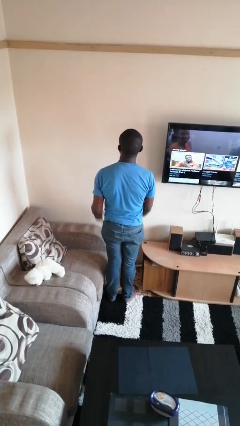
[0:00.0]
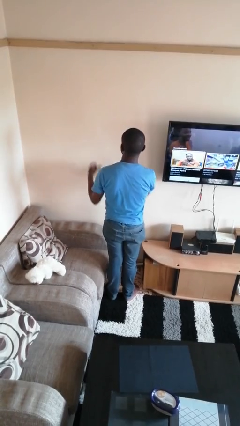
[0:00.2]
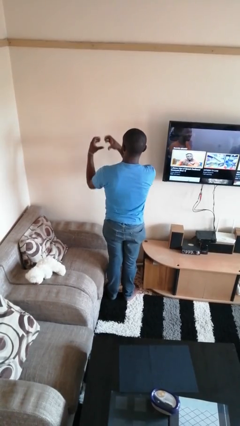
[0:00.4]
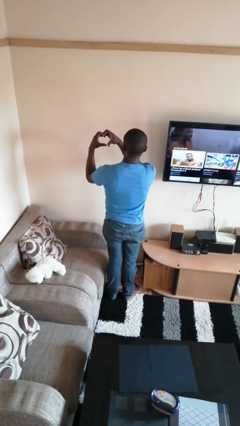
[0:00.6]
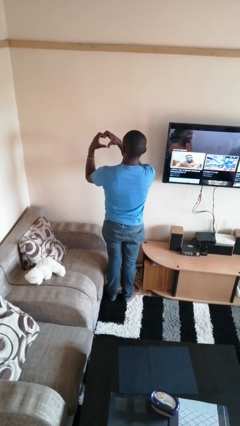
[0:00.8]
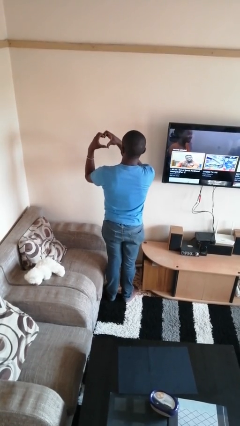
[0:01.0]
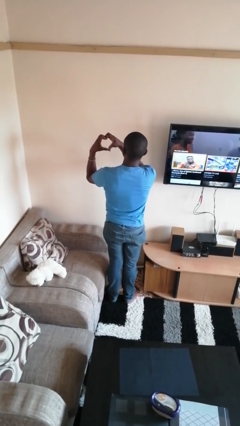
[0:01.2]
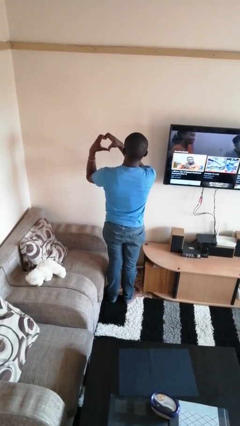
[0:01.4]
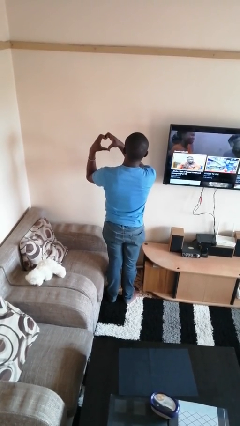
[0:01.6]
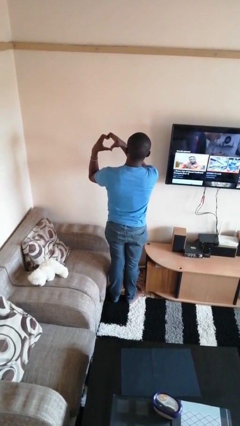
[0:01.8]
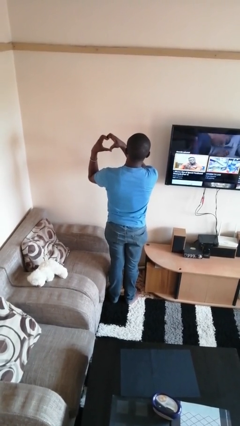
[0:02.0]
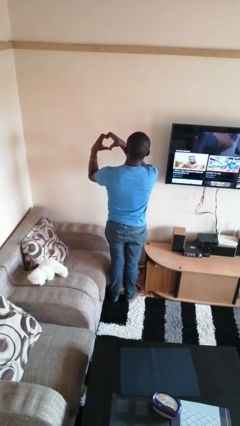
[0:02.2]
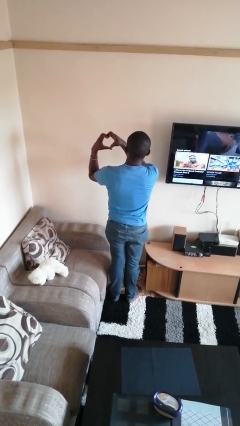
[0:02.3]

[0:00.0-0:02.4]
person gestures heart

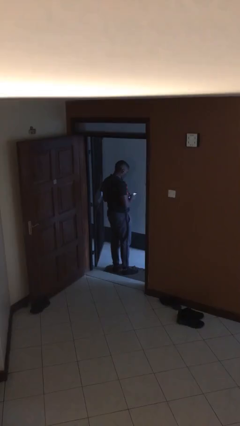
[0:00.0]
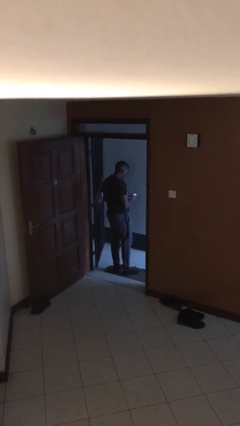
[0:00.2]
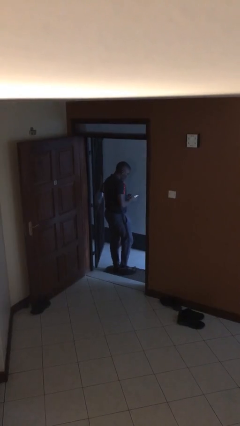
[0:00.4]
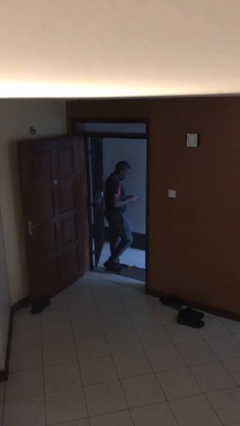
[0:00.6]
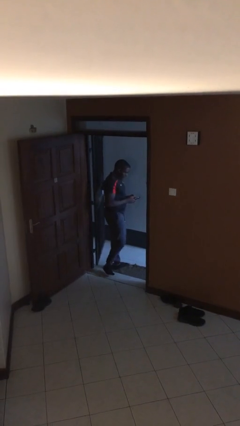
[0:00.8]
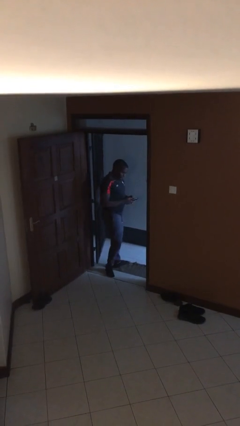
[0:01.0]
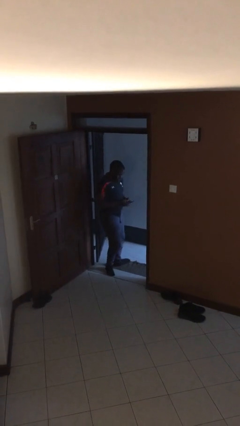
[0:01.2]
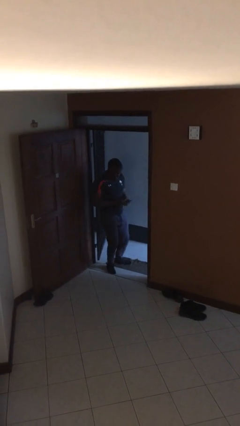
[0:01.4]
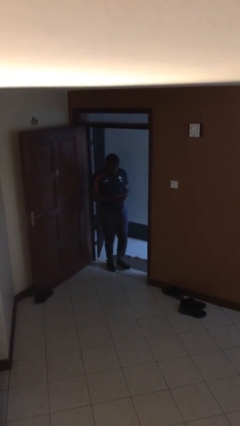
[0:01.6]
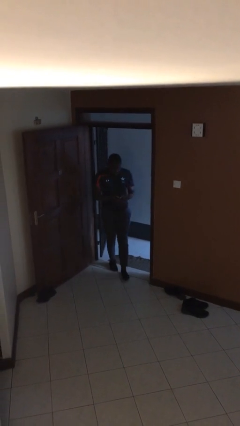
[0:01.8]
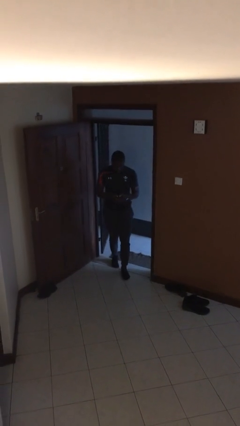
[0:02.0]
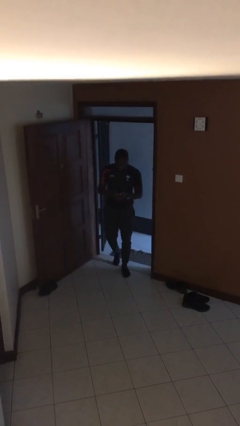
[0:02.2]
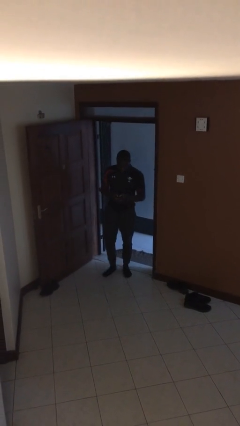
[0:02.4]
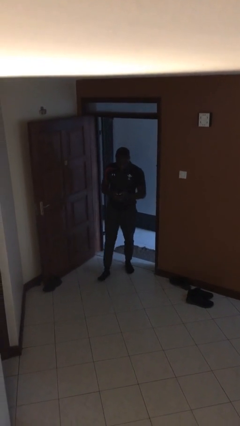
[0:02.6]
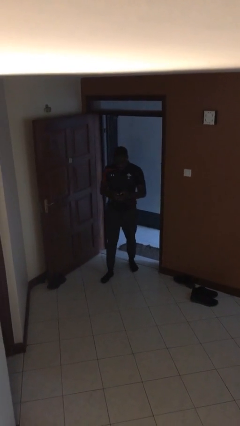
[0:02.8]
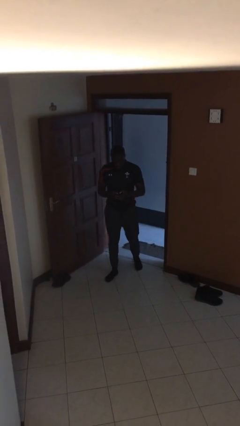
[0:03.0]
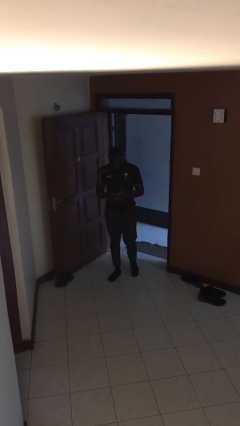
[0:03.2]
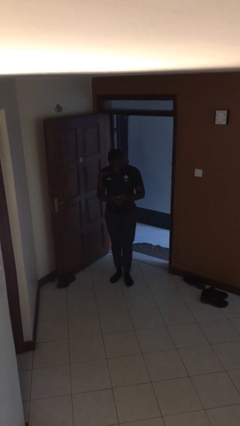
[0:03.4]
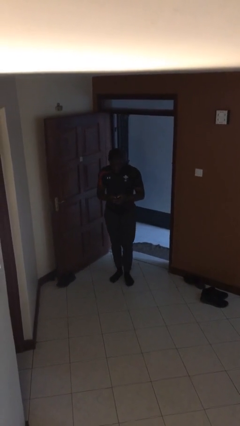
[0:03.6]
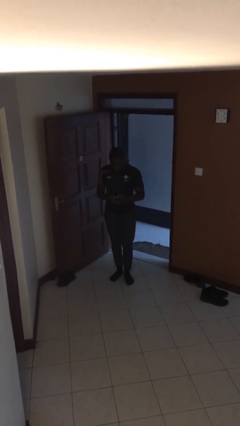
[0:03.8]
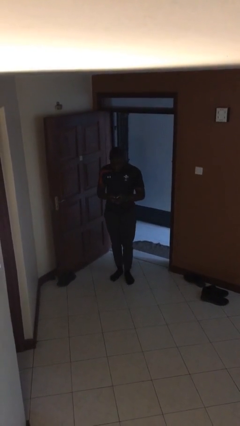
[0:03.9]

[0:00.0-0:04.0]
person enters scene through structure

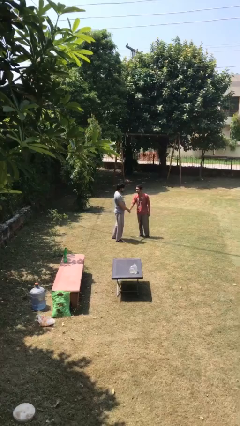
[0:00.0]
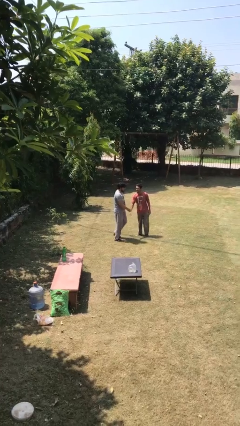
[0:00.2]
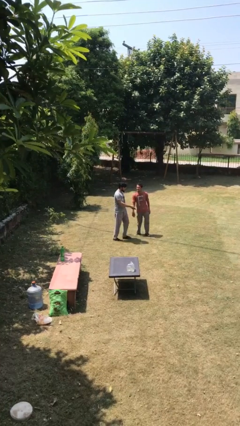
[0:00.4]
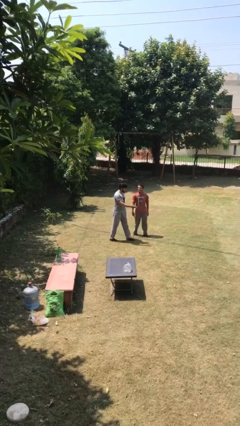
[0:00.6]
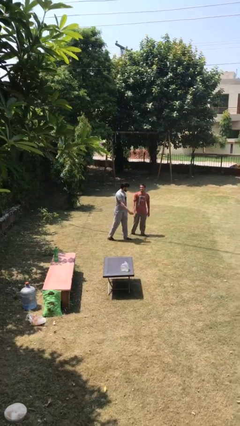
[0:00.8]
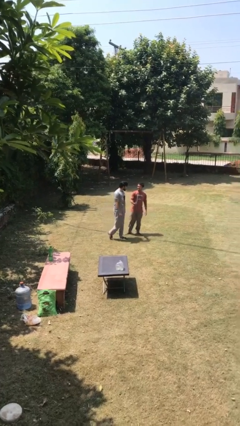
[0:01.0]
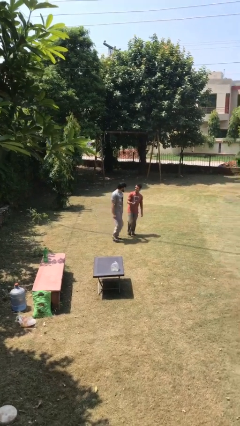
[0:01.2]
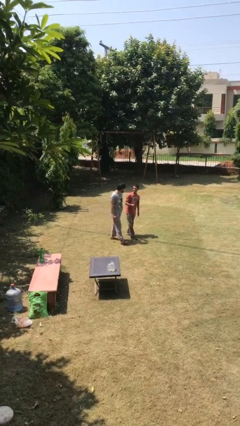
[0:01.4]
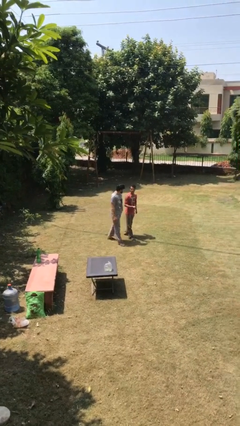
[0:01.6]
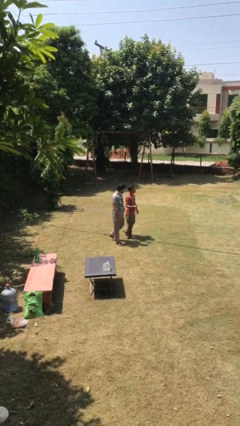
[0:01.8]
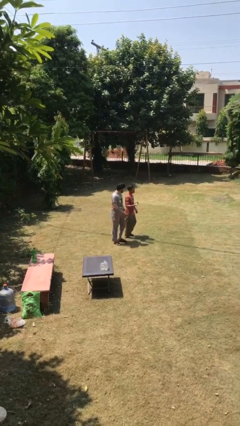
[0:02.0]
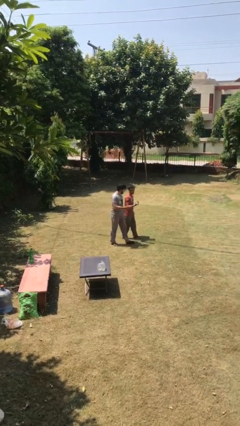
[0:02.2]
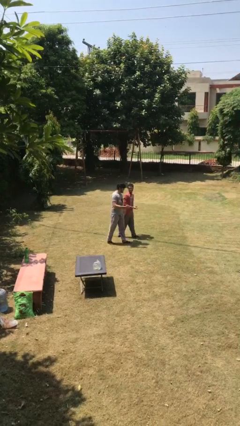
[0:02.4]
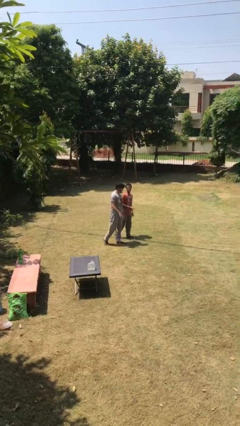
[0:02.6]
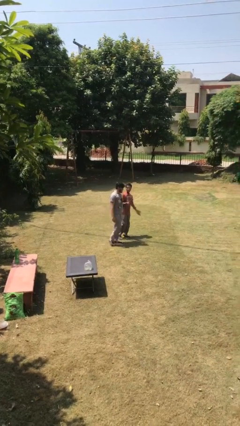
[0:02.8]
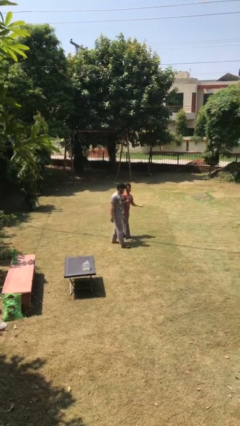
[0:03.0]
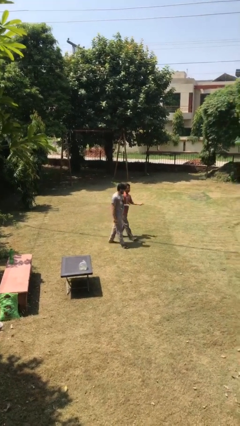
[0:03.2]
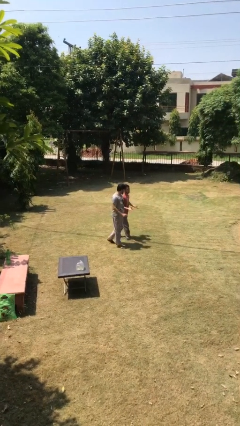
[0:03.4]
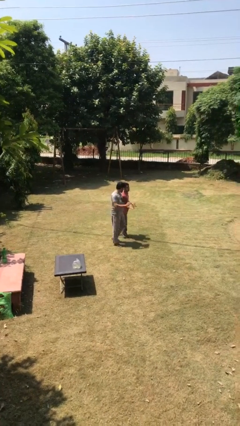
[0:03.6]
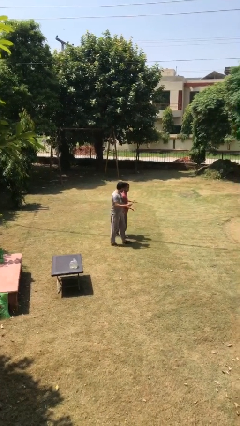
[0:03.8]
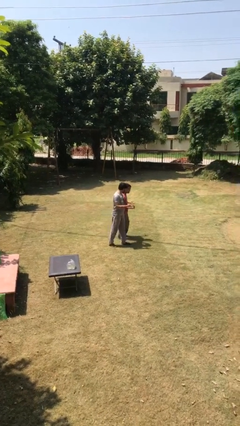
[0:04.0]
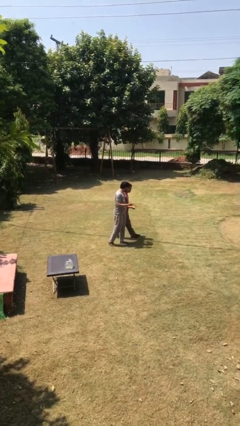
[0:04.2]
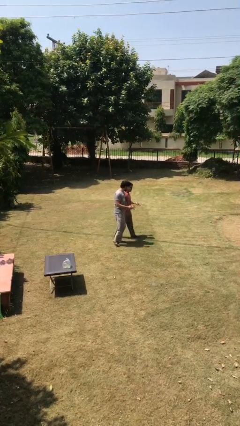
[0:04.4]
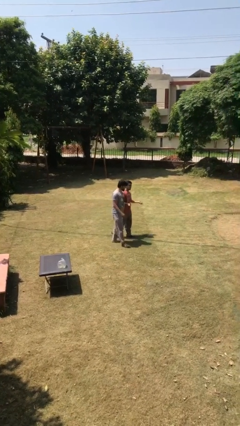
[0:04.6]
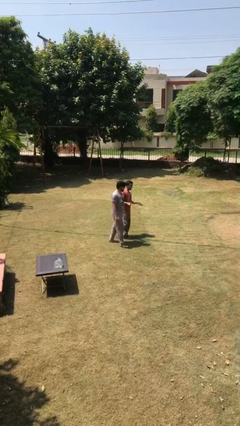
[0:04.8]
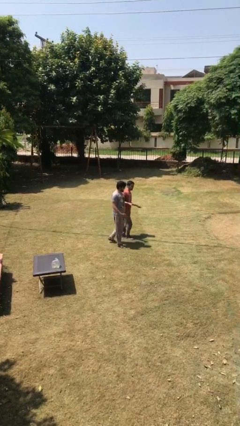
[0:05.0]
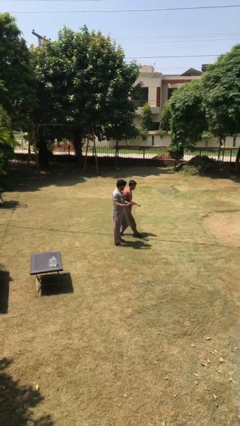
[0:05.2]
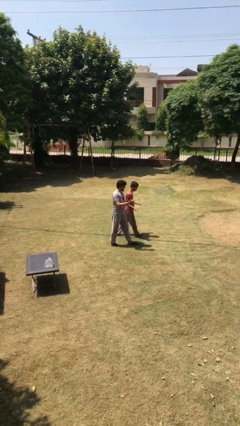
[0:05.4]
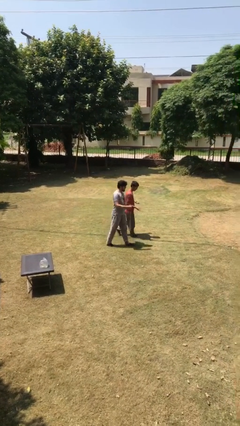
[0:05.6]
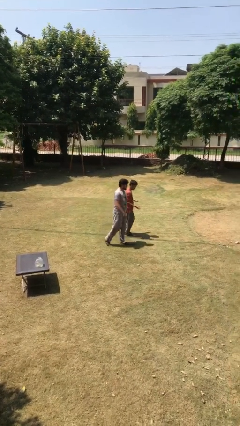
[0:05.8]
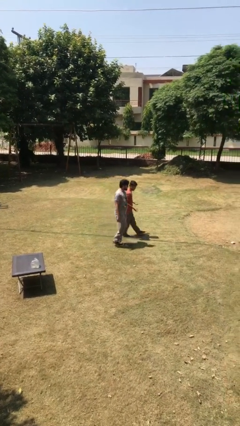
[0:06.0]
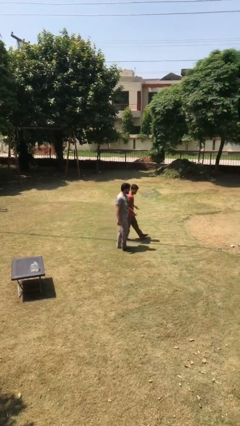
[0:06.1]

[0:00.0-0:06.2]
person talks to person

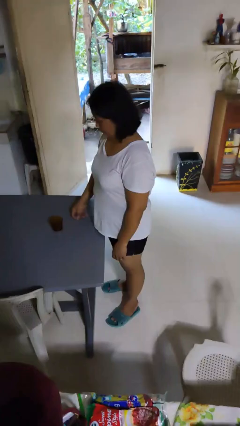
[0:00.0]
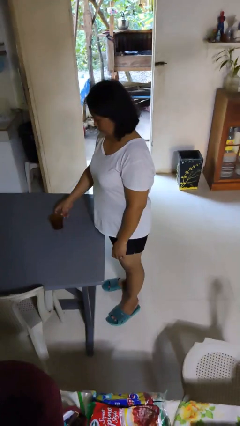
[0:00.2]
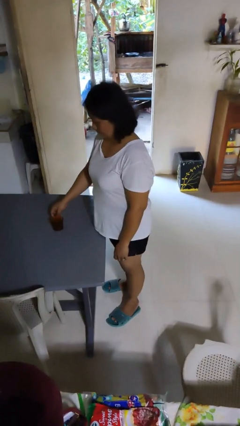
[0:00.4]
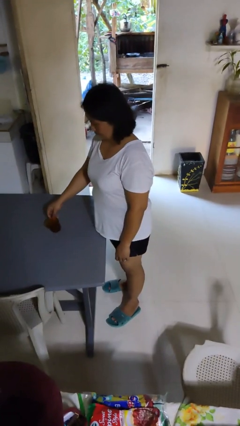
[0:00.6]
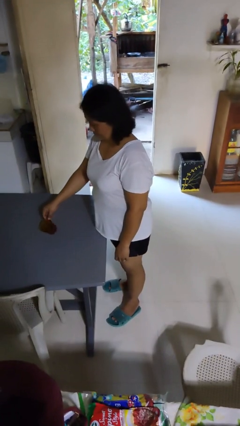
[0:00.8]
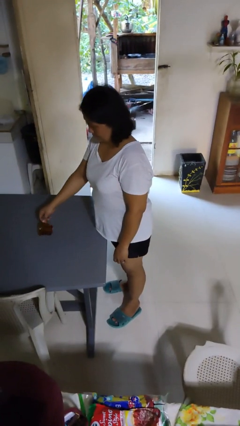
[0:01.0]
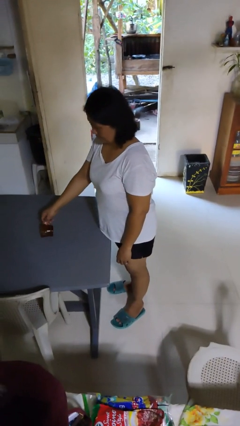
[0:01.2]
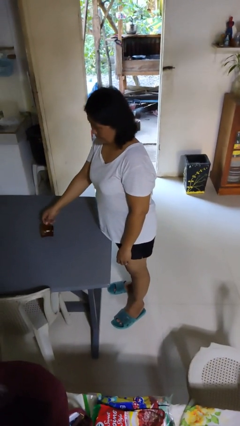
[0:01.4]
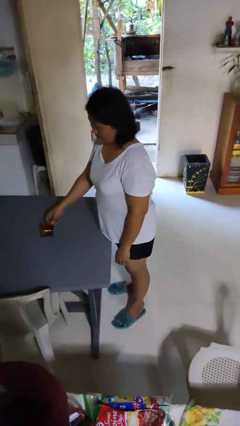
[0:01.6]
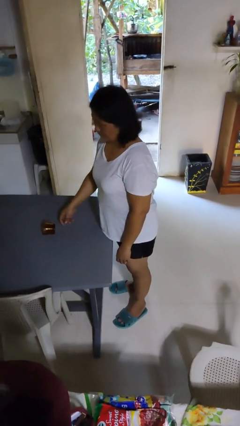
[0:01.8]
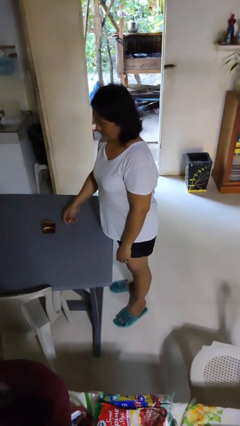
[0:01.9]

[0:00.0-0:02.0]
person knocks over glass

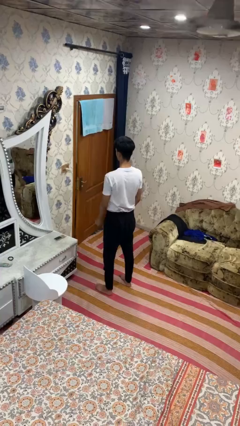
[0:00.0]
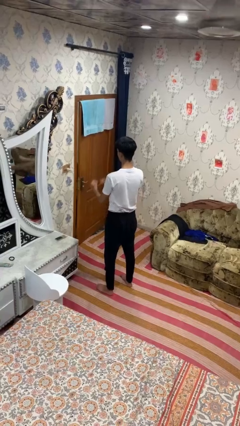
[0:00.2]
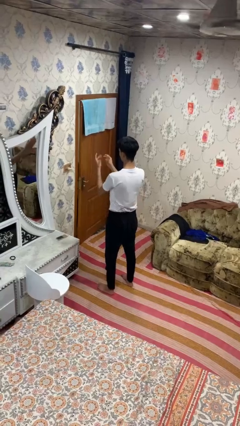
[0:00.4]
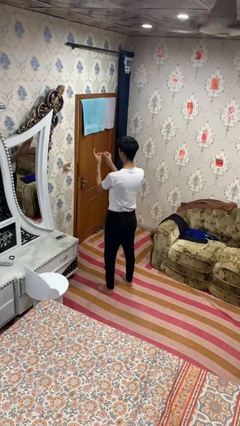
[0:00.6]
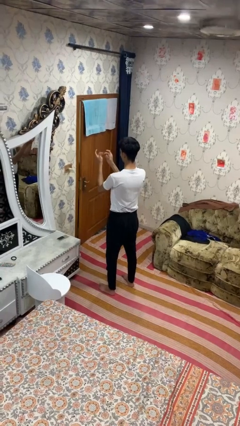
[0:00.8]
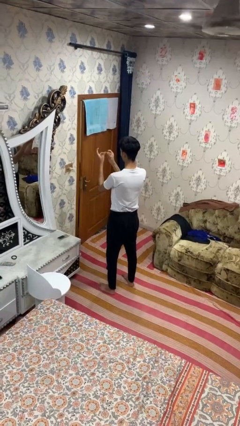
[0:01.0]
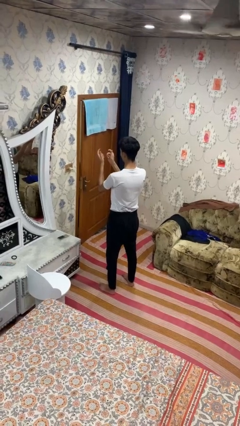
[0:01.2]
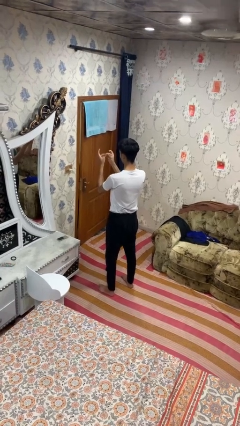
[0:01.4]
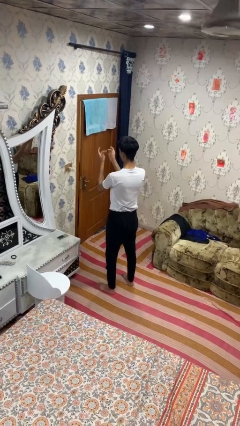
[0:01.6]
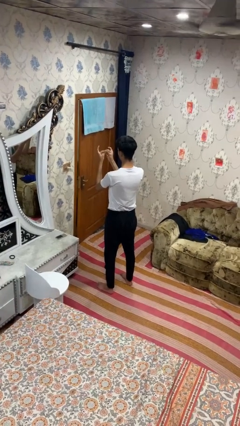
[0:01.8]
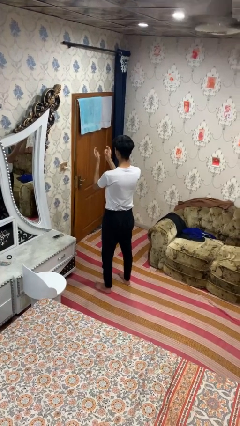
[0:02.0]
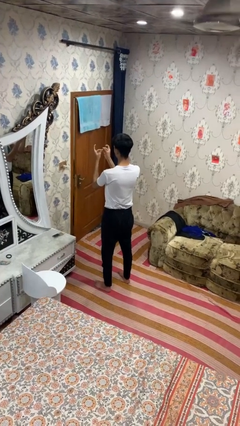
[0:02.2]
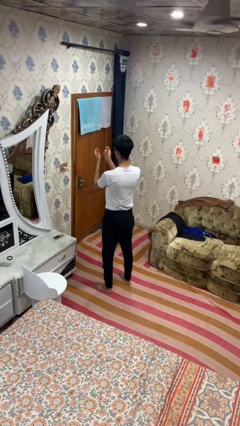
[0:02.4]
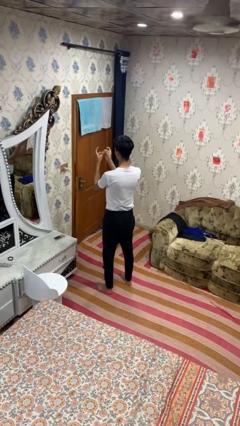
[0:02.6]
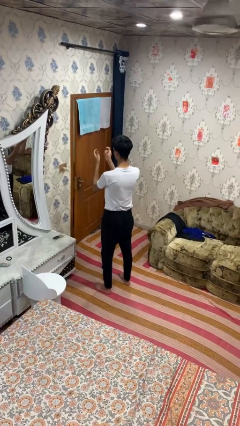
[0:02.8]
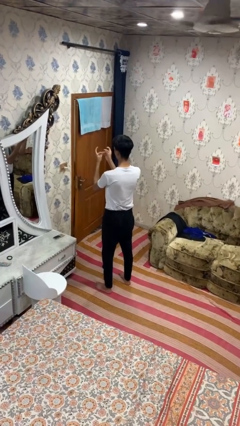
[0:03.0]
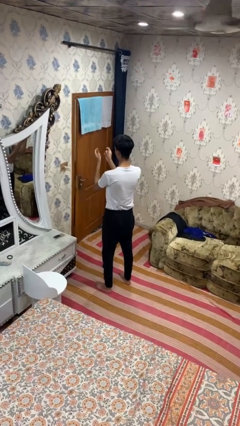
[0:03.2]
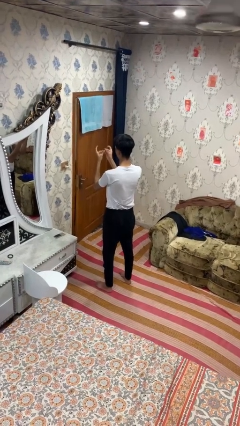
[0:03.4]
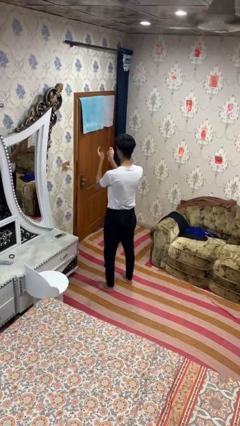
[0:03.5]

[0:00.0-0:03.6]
person snaps fingers
